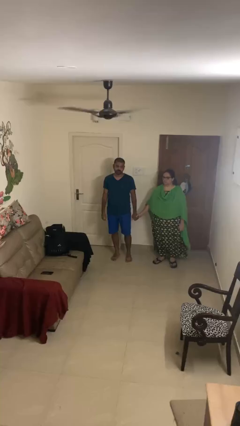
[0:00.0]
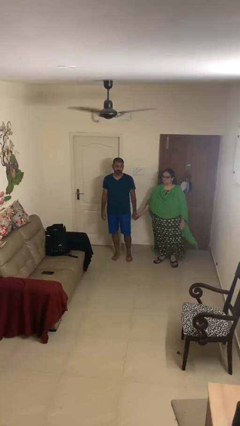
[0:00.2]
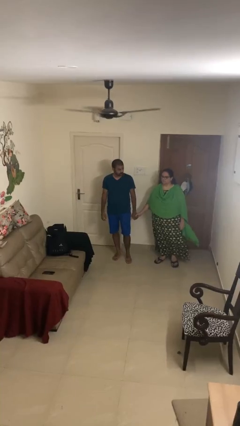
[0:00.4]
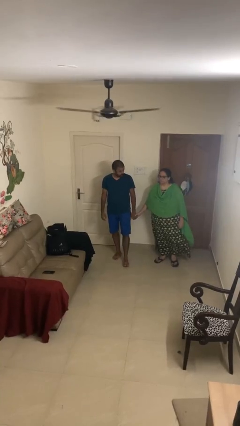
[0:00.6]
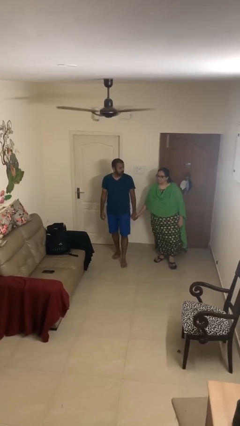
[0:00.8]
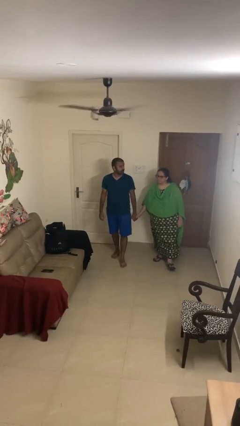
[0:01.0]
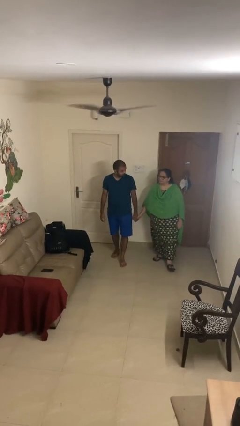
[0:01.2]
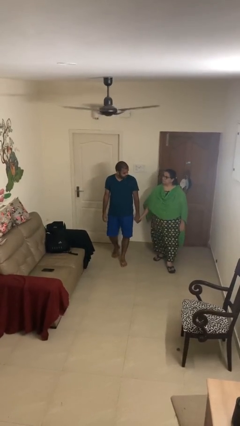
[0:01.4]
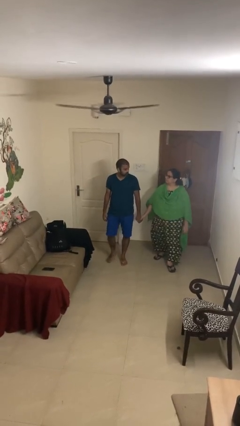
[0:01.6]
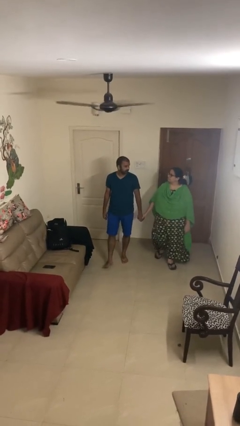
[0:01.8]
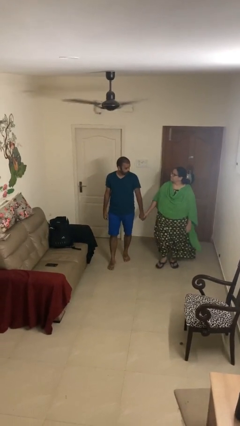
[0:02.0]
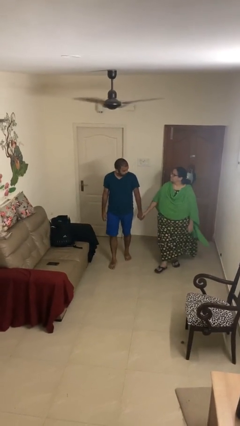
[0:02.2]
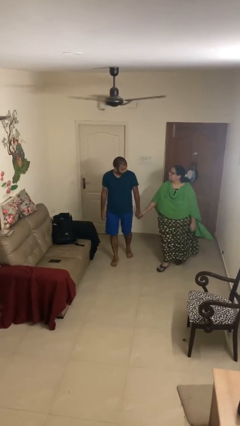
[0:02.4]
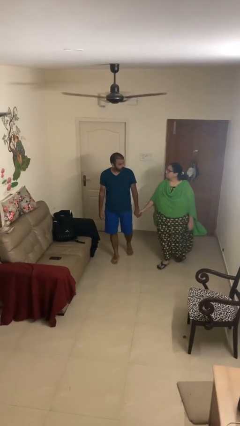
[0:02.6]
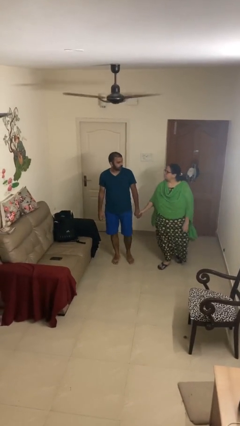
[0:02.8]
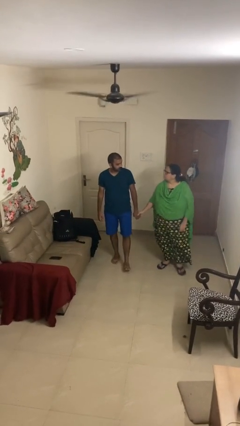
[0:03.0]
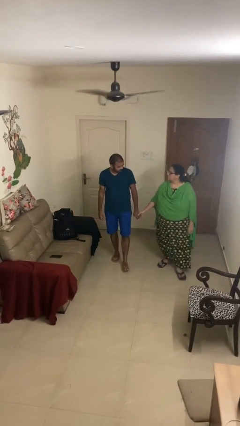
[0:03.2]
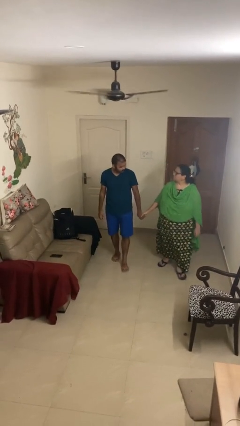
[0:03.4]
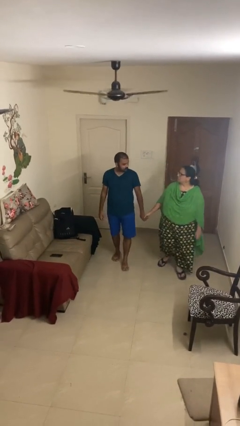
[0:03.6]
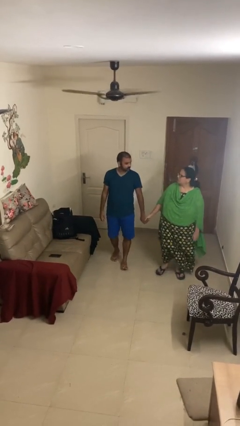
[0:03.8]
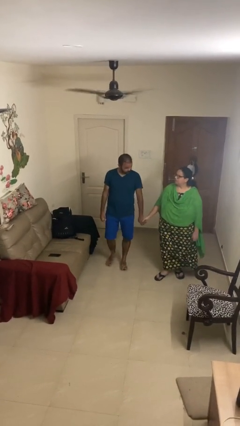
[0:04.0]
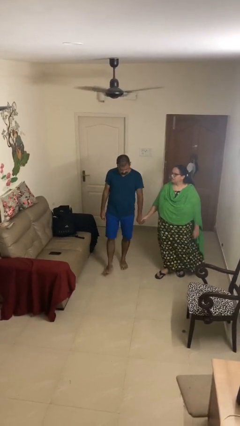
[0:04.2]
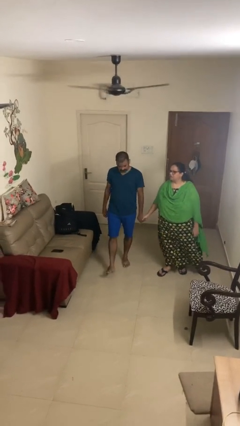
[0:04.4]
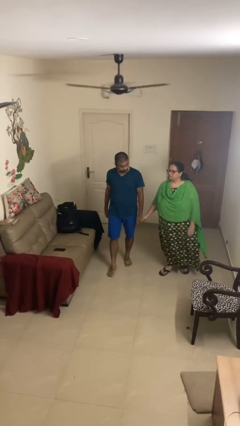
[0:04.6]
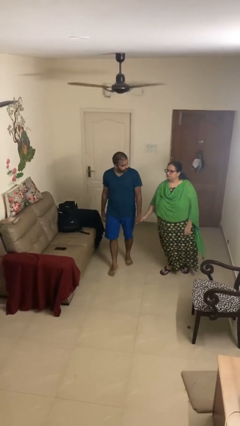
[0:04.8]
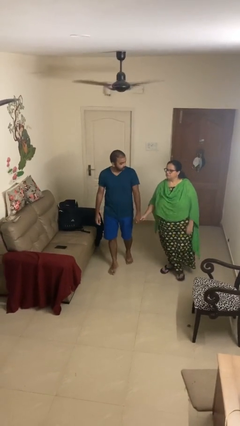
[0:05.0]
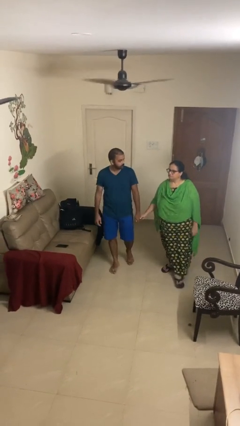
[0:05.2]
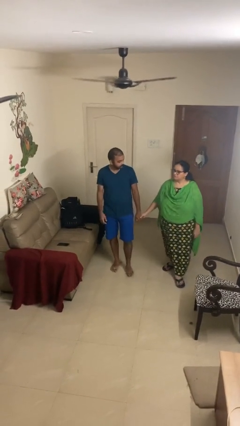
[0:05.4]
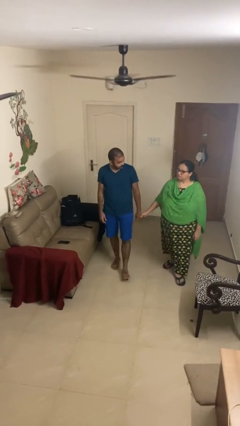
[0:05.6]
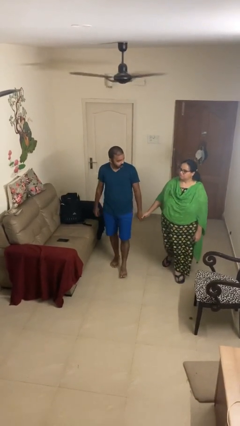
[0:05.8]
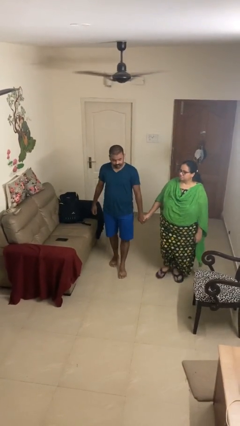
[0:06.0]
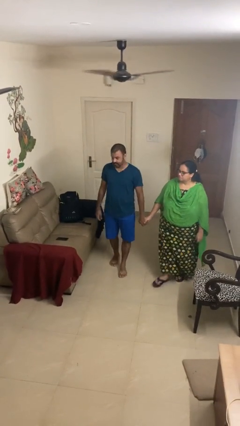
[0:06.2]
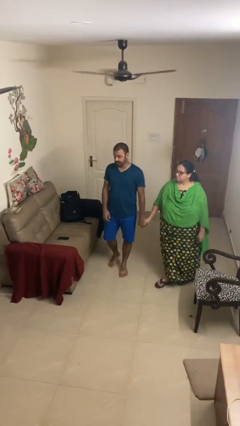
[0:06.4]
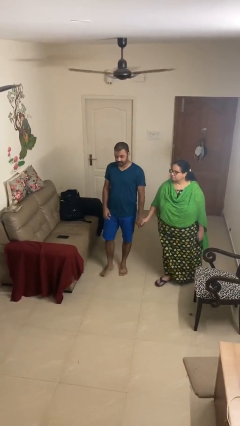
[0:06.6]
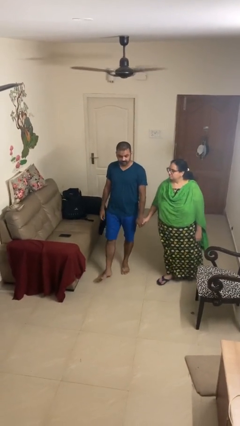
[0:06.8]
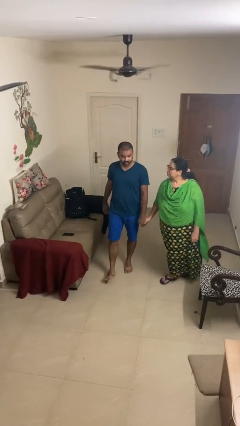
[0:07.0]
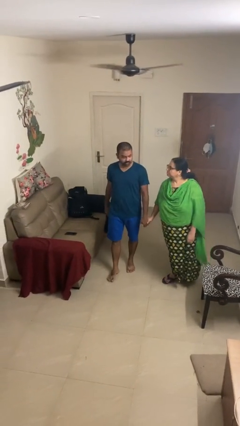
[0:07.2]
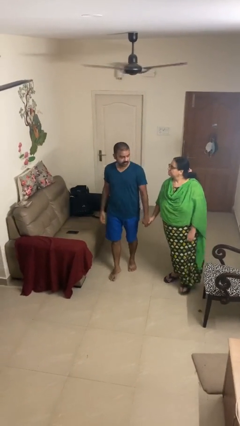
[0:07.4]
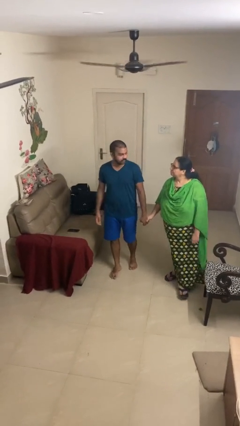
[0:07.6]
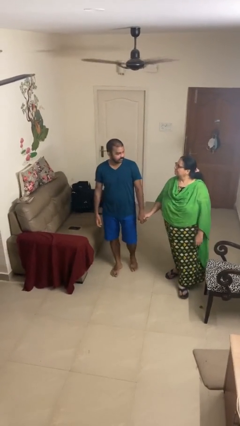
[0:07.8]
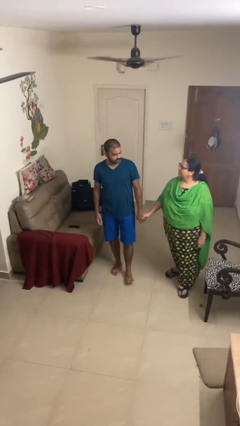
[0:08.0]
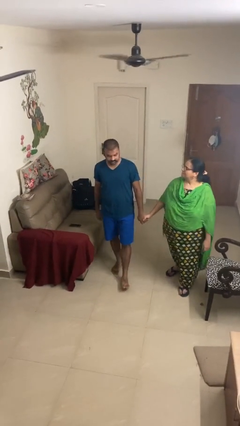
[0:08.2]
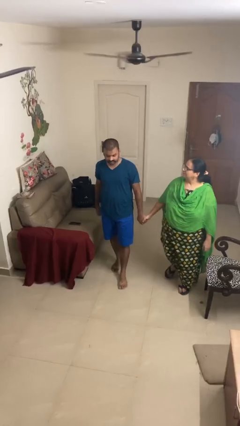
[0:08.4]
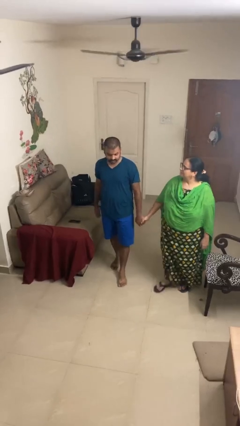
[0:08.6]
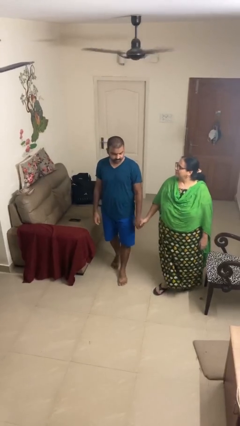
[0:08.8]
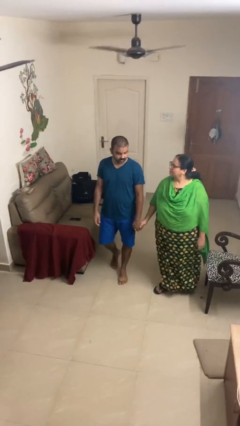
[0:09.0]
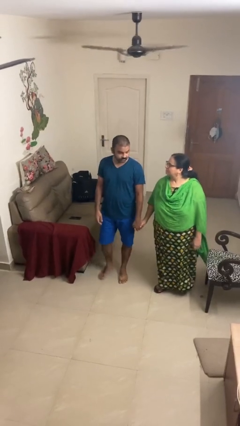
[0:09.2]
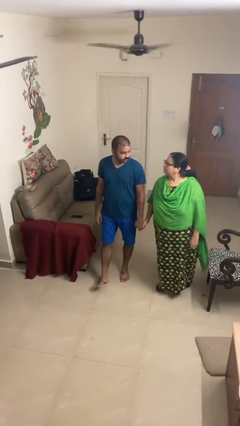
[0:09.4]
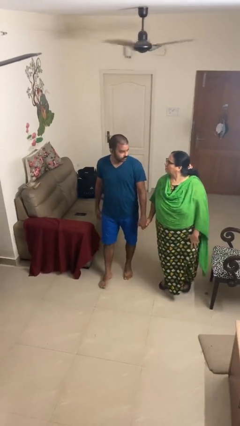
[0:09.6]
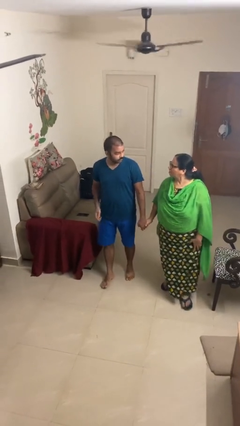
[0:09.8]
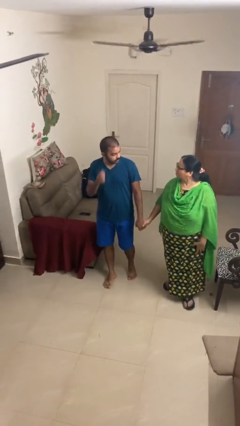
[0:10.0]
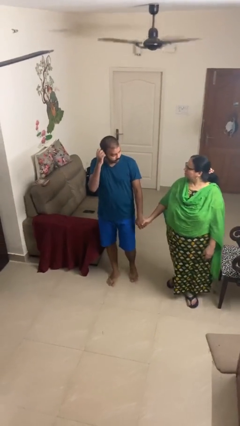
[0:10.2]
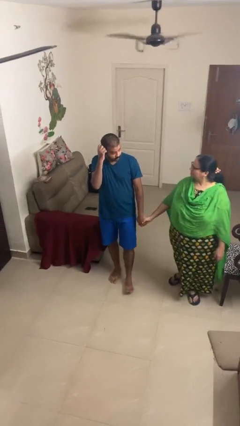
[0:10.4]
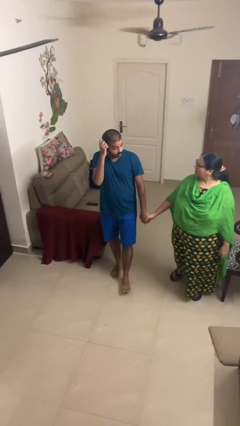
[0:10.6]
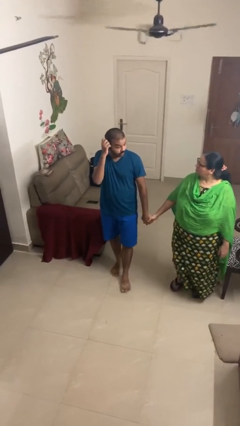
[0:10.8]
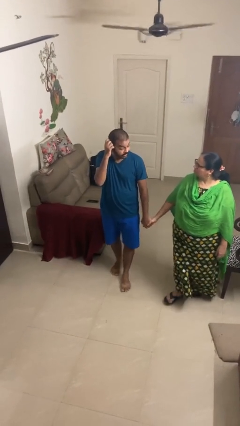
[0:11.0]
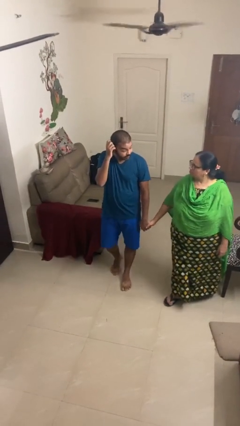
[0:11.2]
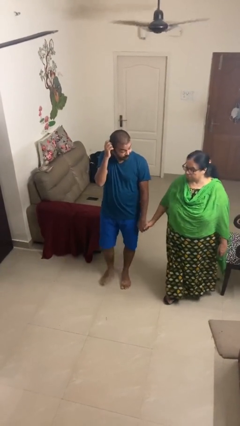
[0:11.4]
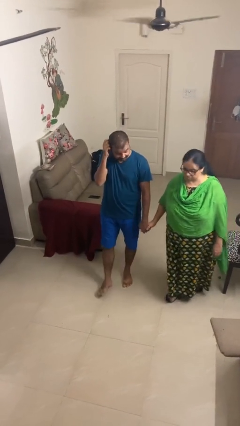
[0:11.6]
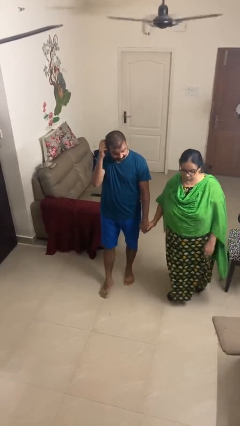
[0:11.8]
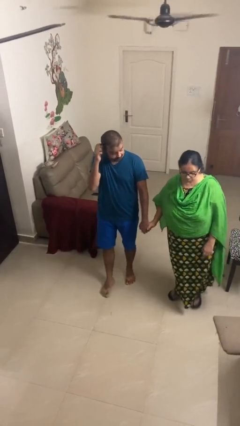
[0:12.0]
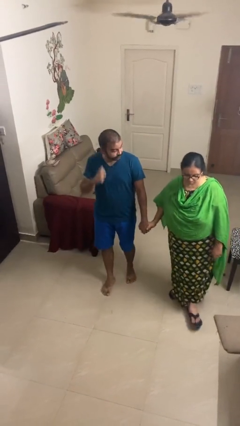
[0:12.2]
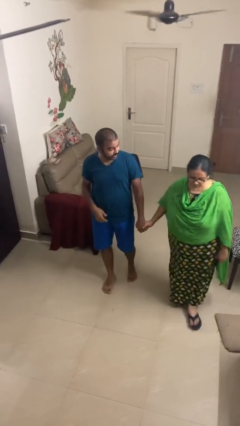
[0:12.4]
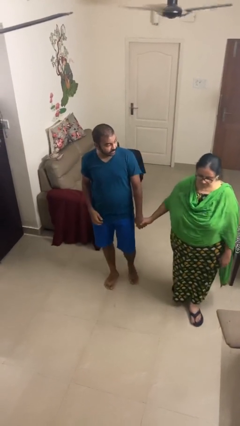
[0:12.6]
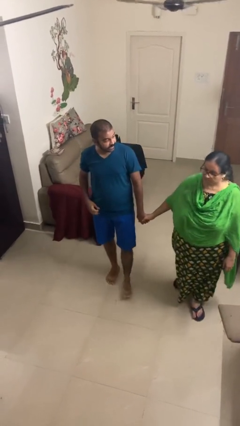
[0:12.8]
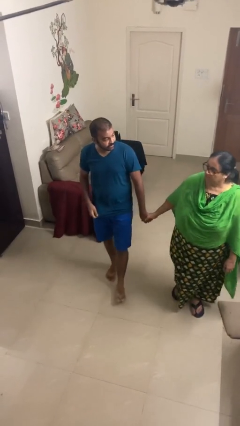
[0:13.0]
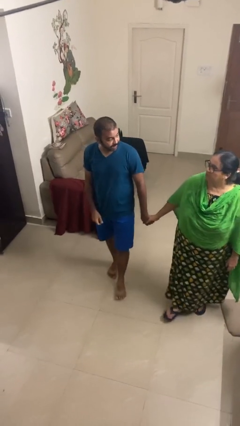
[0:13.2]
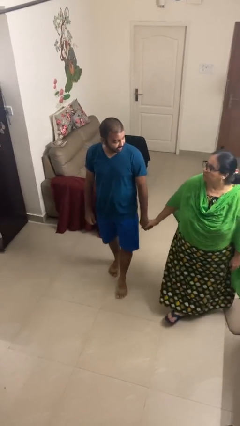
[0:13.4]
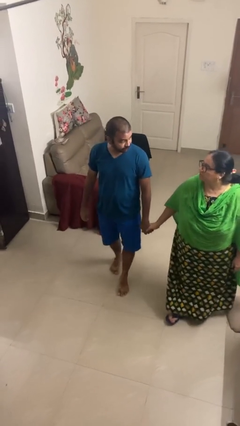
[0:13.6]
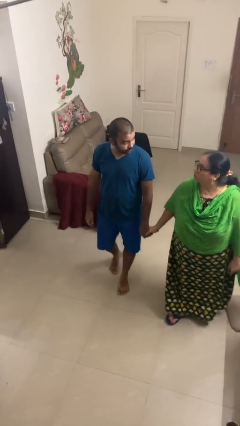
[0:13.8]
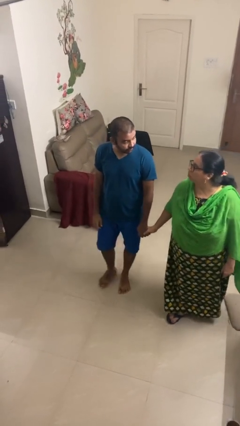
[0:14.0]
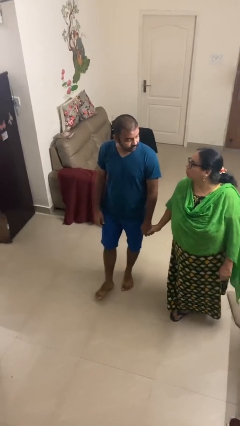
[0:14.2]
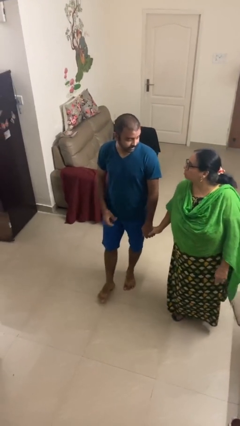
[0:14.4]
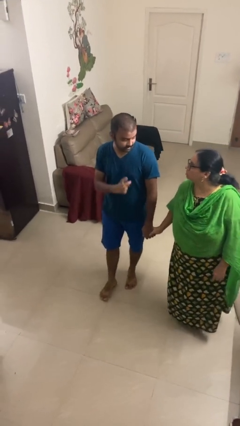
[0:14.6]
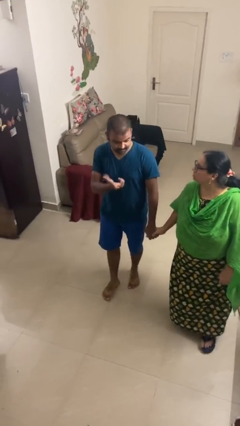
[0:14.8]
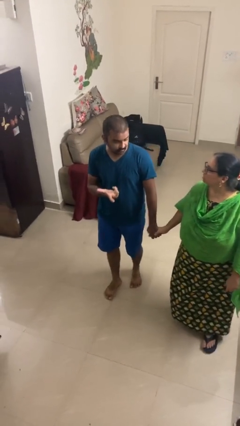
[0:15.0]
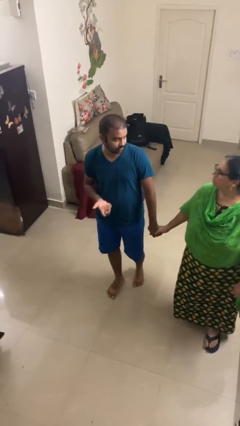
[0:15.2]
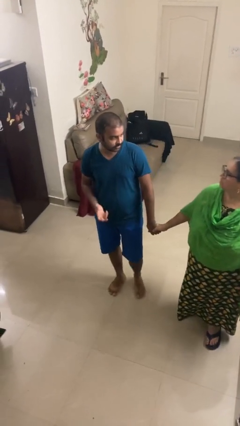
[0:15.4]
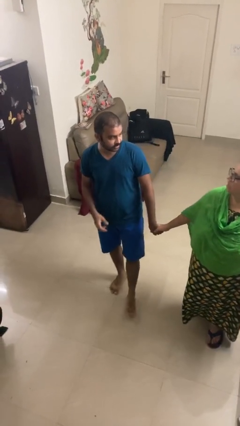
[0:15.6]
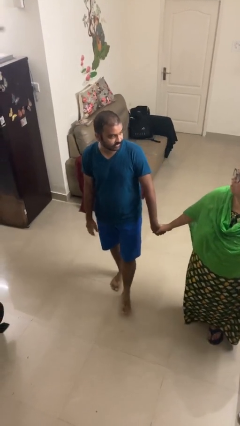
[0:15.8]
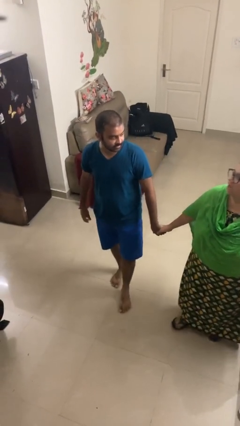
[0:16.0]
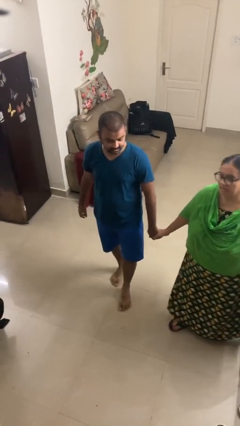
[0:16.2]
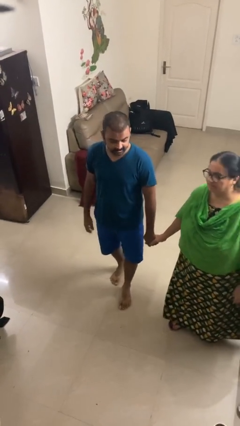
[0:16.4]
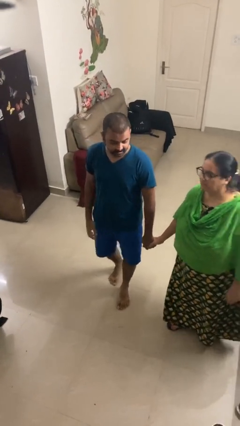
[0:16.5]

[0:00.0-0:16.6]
person holds hand

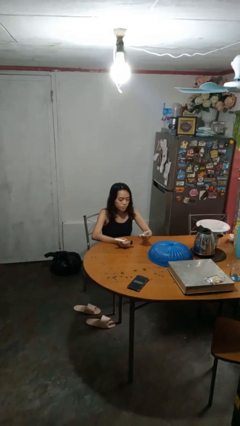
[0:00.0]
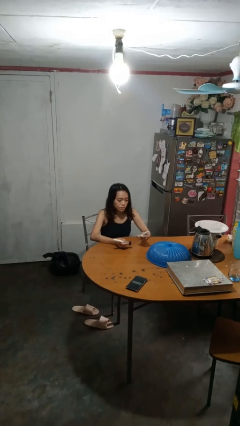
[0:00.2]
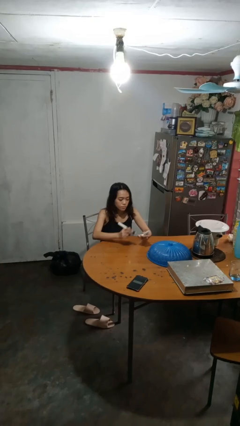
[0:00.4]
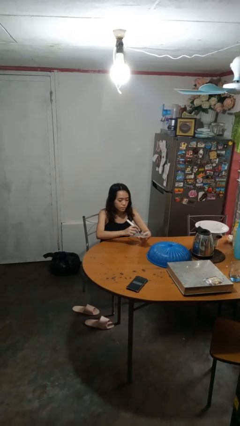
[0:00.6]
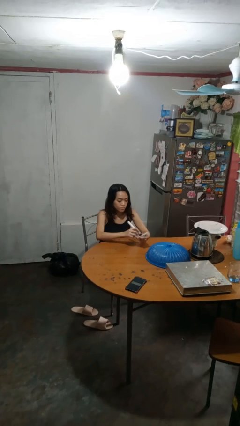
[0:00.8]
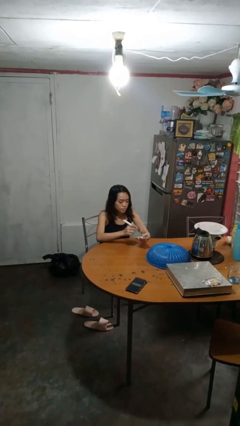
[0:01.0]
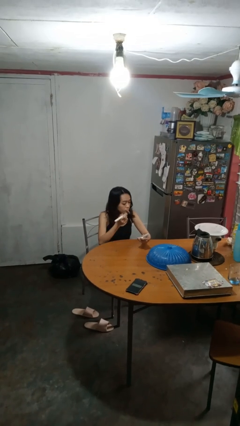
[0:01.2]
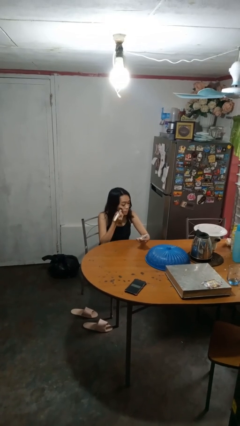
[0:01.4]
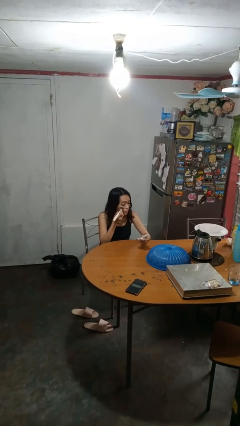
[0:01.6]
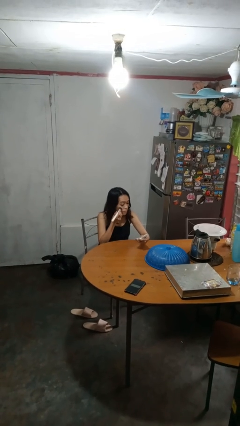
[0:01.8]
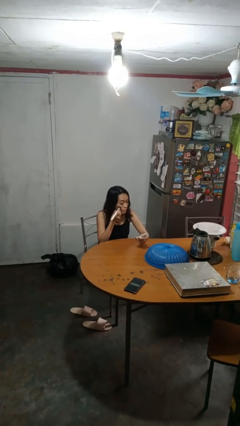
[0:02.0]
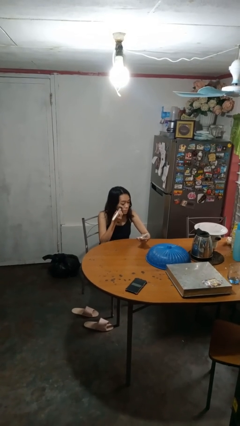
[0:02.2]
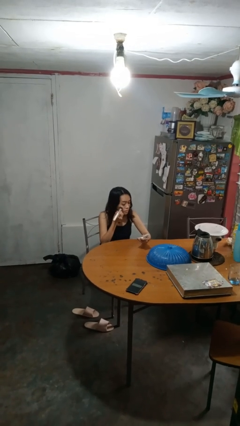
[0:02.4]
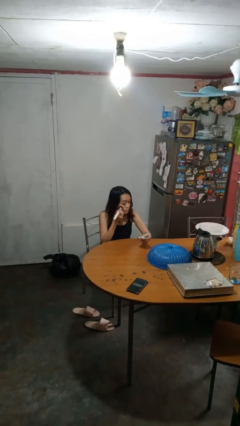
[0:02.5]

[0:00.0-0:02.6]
person applies foundation makeup
